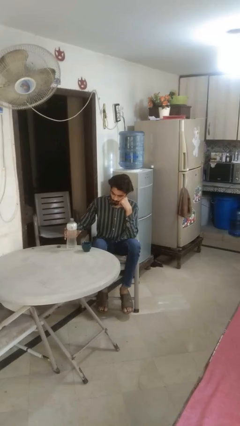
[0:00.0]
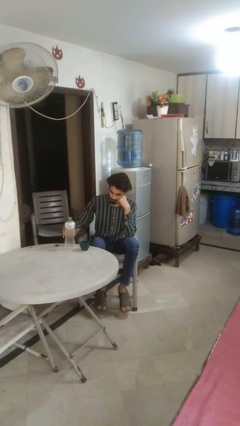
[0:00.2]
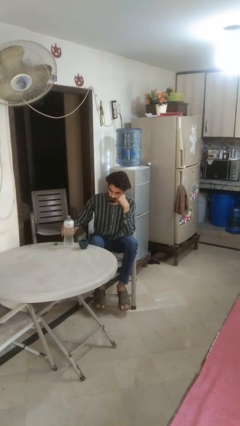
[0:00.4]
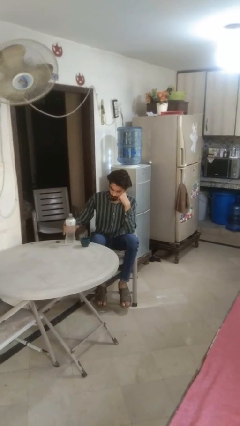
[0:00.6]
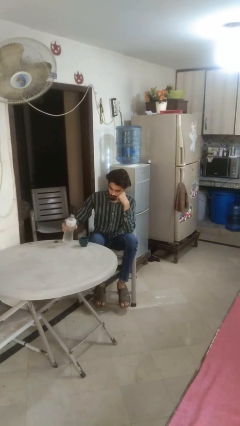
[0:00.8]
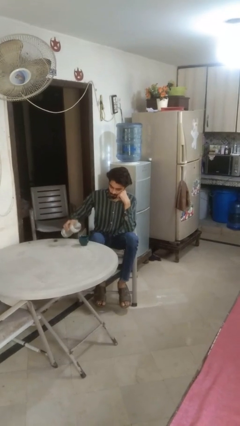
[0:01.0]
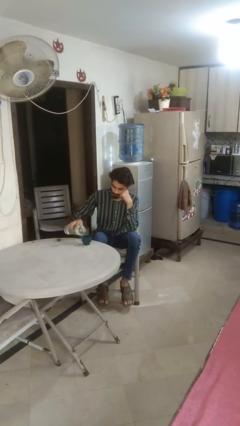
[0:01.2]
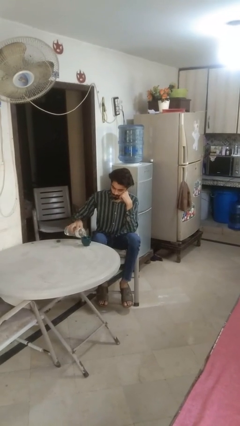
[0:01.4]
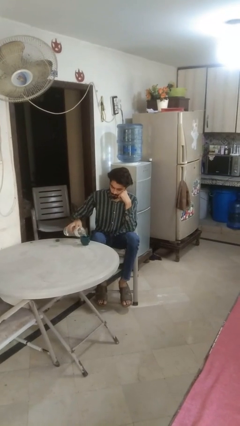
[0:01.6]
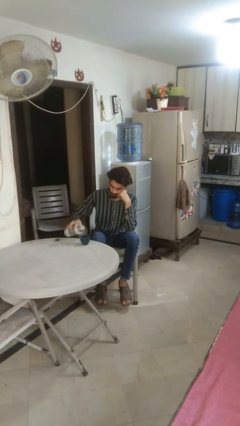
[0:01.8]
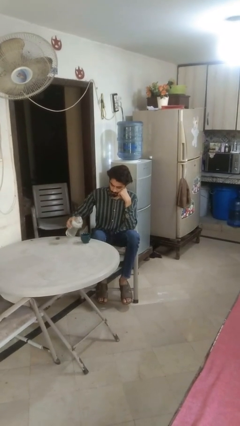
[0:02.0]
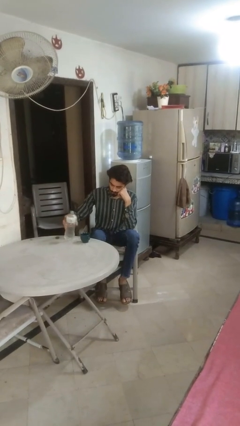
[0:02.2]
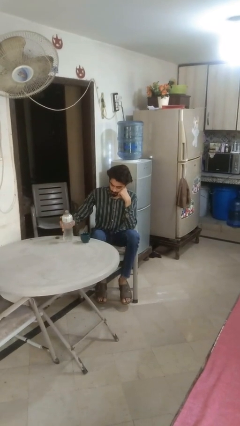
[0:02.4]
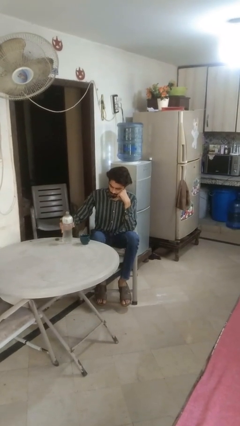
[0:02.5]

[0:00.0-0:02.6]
person pours liquid into cup

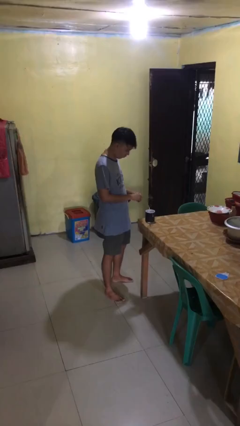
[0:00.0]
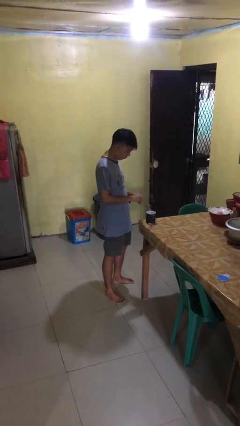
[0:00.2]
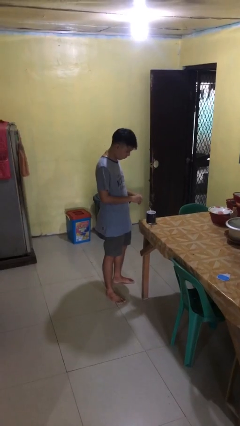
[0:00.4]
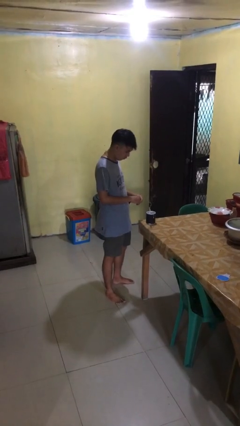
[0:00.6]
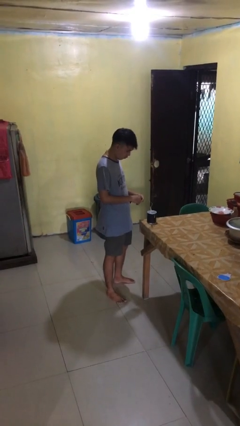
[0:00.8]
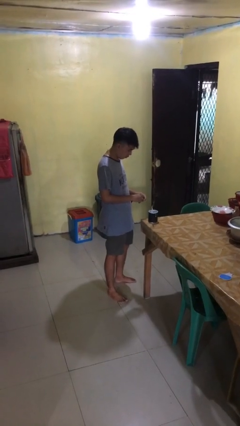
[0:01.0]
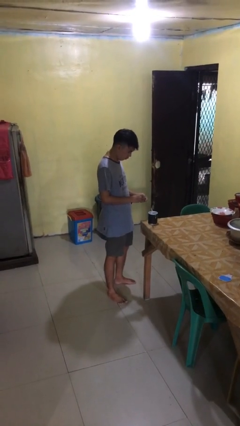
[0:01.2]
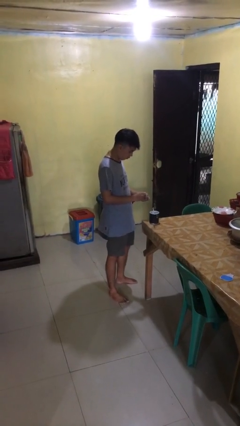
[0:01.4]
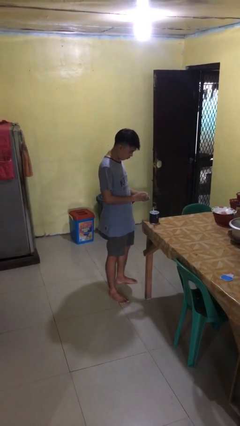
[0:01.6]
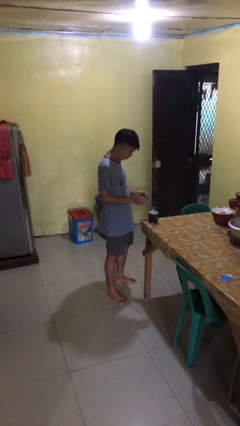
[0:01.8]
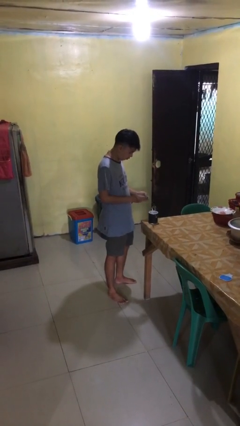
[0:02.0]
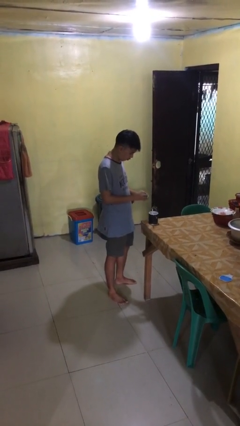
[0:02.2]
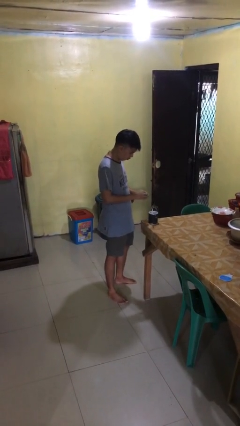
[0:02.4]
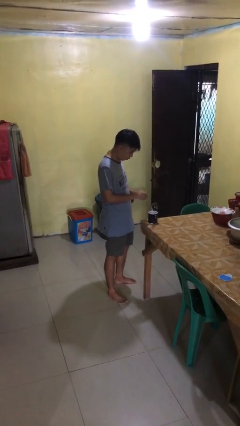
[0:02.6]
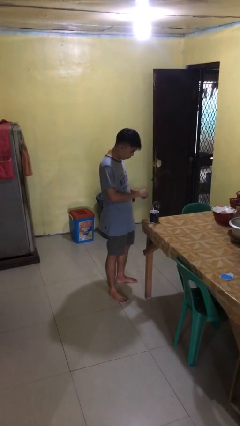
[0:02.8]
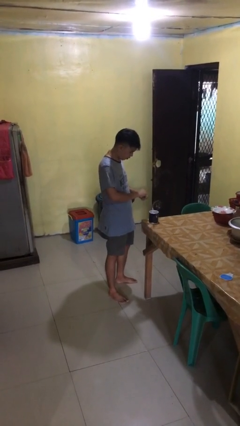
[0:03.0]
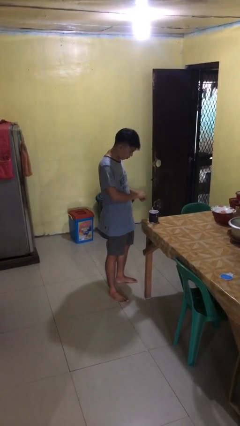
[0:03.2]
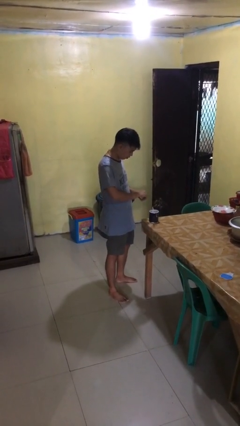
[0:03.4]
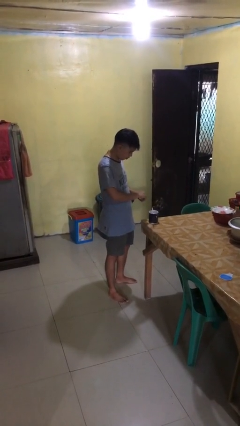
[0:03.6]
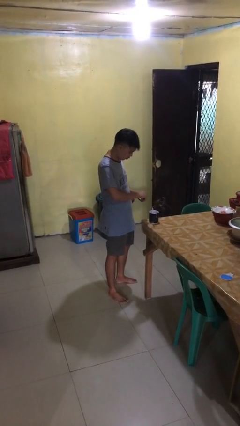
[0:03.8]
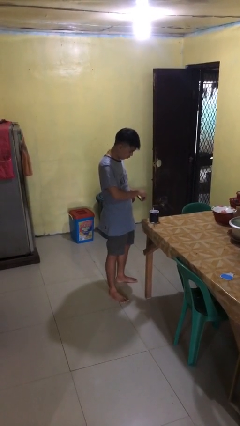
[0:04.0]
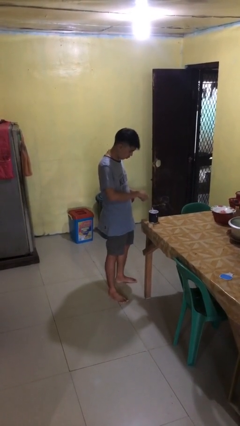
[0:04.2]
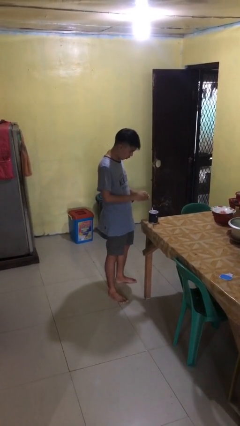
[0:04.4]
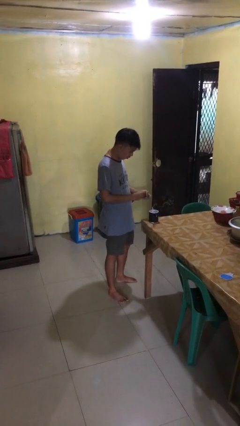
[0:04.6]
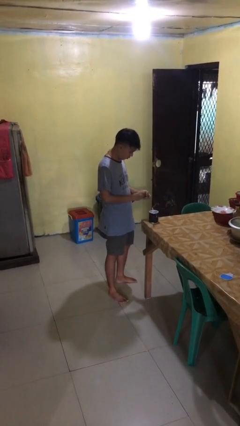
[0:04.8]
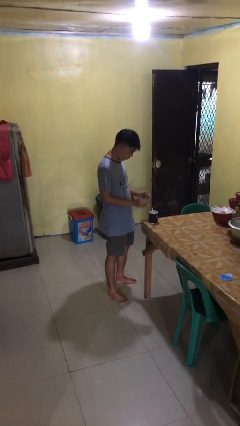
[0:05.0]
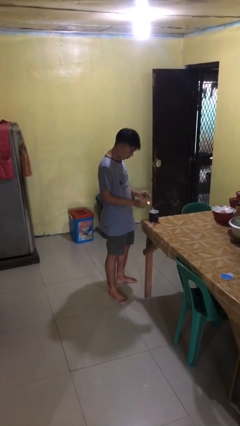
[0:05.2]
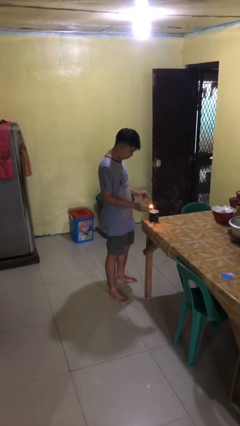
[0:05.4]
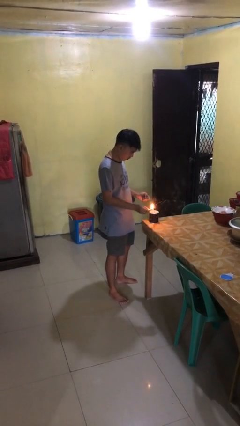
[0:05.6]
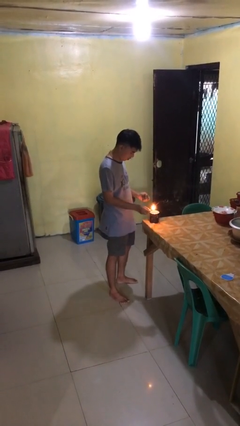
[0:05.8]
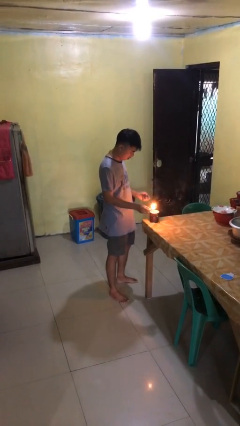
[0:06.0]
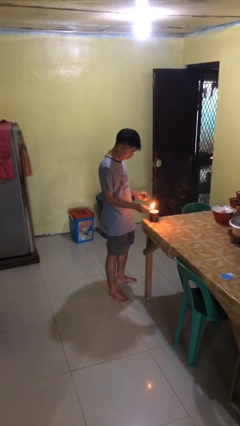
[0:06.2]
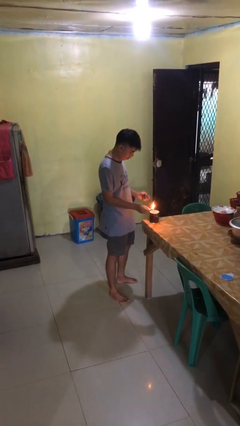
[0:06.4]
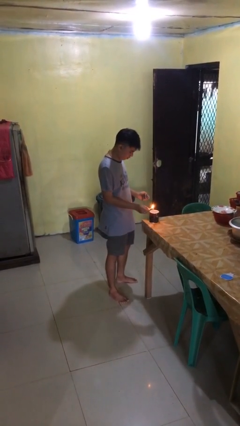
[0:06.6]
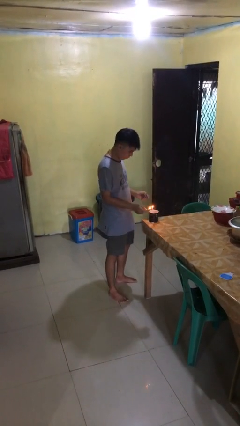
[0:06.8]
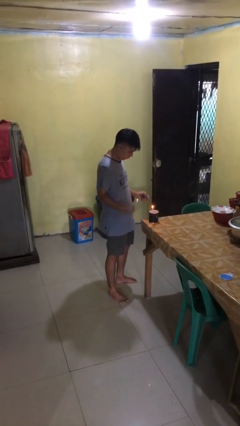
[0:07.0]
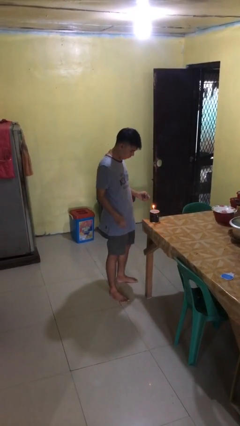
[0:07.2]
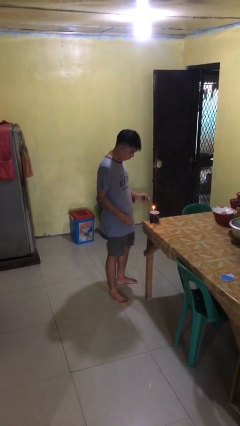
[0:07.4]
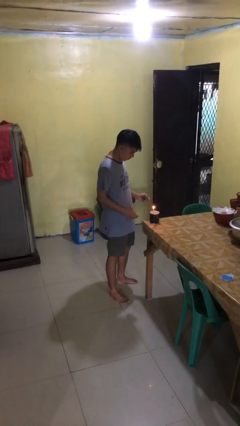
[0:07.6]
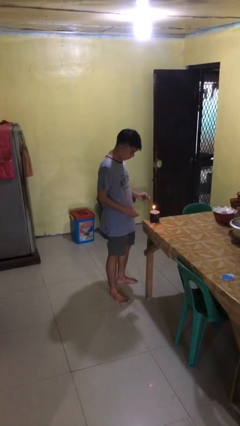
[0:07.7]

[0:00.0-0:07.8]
person lights candle

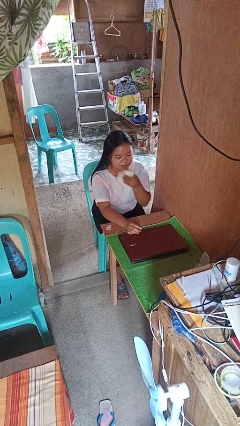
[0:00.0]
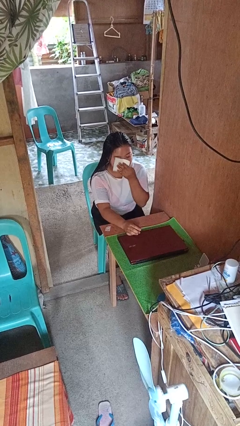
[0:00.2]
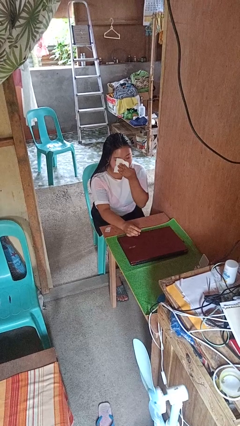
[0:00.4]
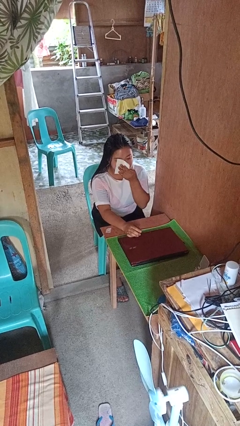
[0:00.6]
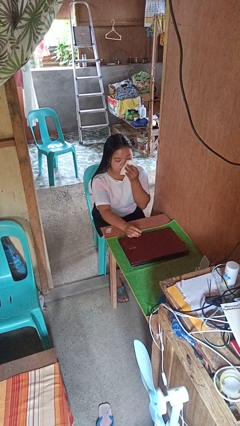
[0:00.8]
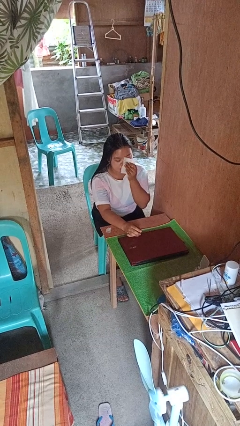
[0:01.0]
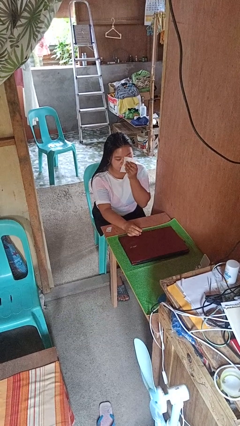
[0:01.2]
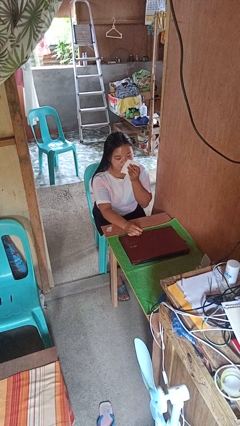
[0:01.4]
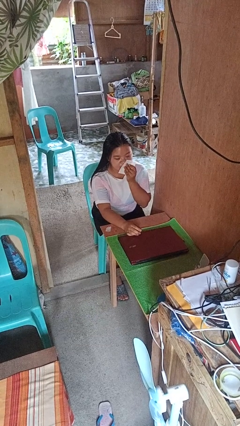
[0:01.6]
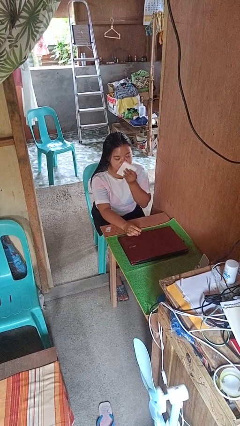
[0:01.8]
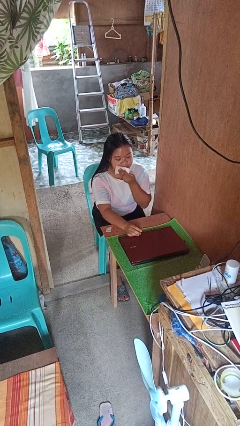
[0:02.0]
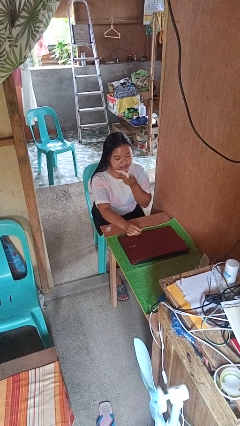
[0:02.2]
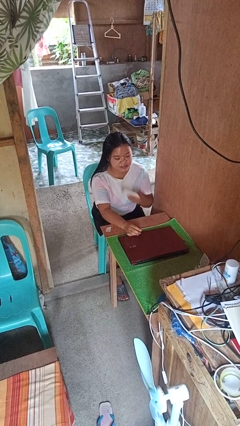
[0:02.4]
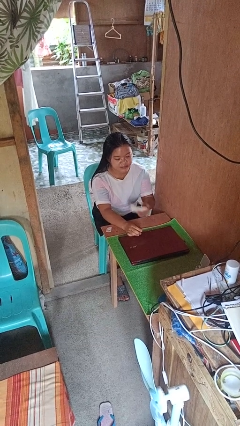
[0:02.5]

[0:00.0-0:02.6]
person wipes mouth with napkin

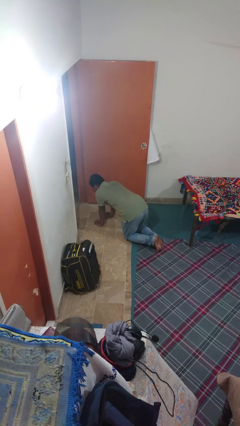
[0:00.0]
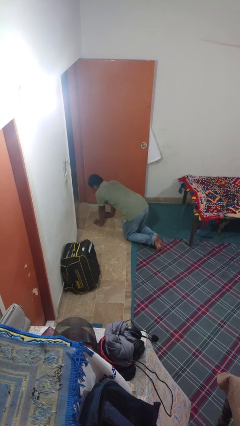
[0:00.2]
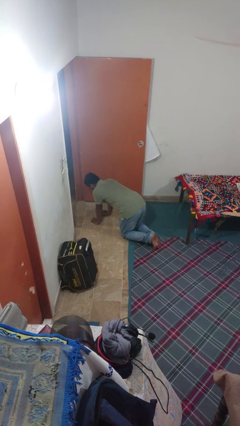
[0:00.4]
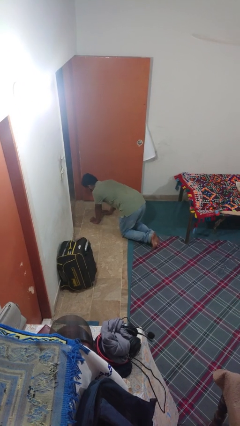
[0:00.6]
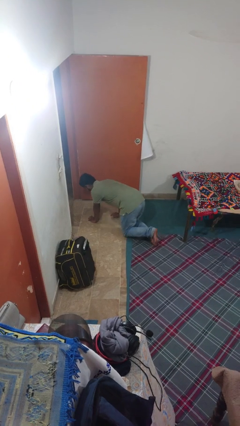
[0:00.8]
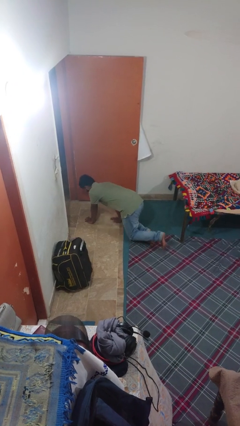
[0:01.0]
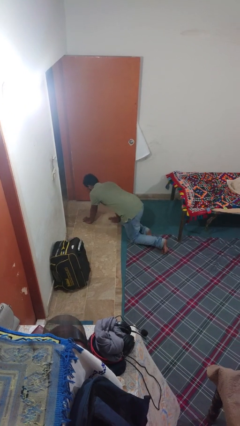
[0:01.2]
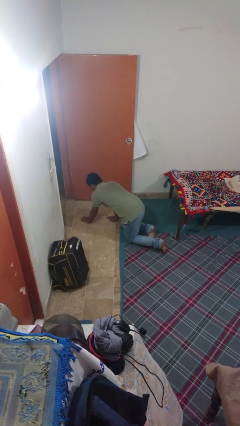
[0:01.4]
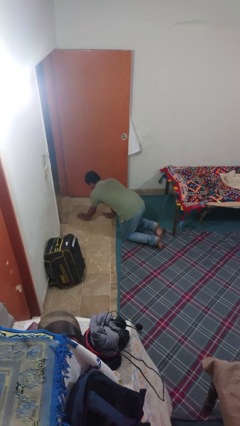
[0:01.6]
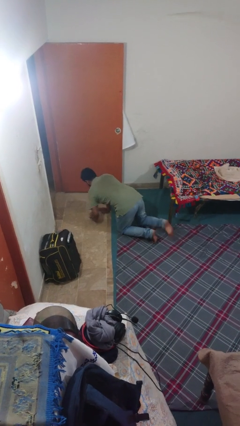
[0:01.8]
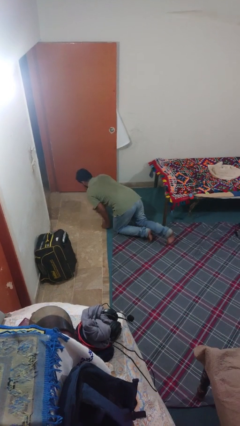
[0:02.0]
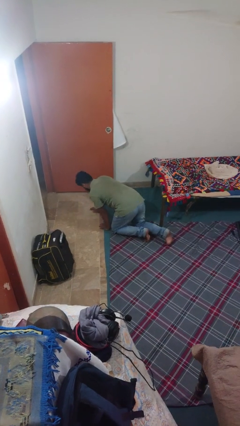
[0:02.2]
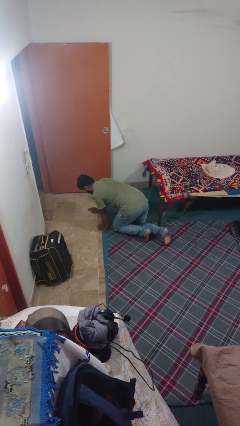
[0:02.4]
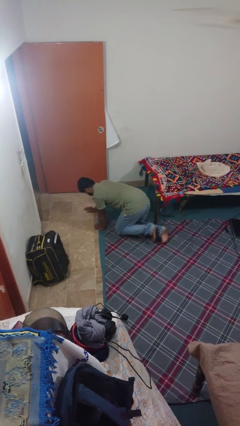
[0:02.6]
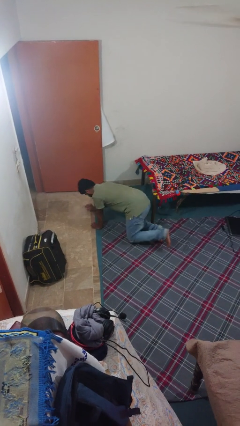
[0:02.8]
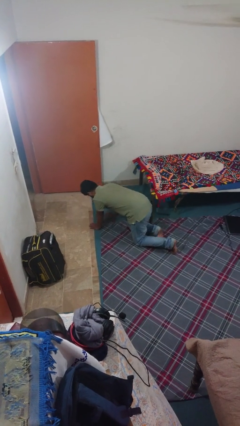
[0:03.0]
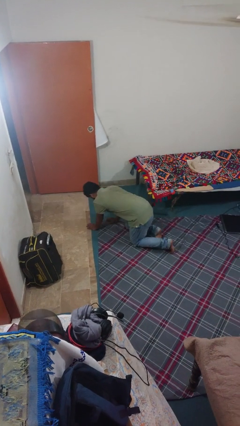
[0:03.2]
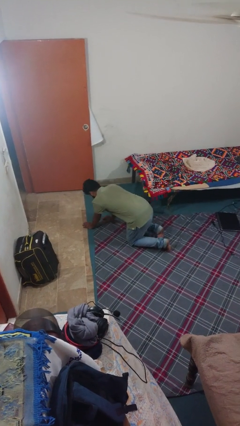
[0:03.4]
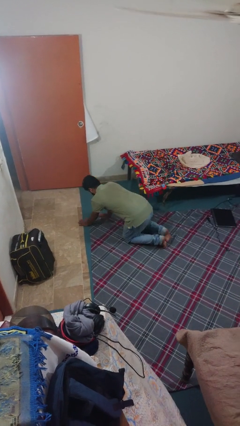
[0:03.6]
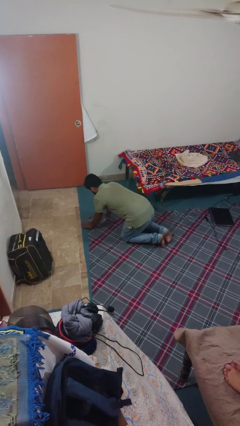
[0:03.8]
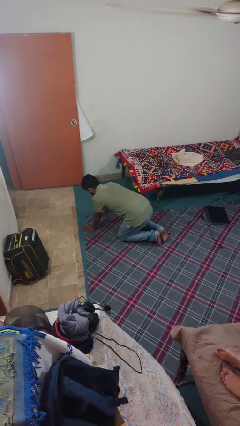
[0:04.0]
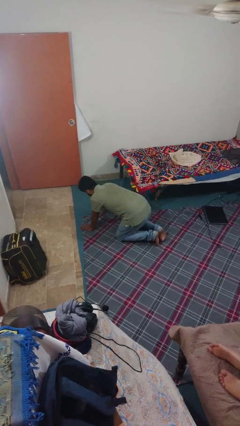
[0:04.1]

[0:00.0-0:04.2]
person crawls
